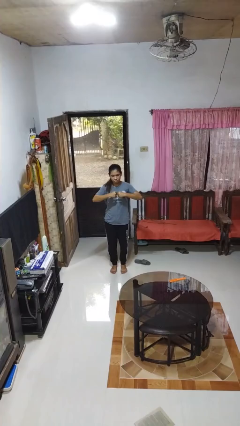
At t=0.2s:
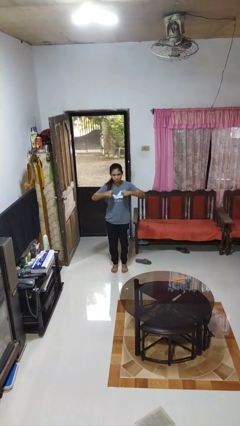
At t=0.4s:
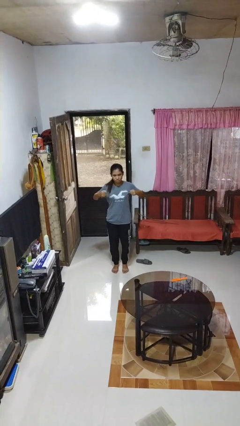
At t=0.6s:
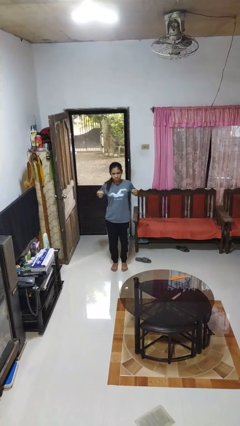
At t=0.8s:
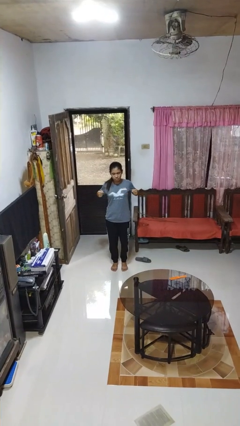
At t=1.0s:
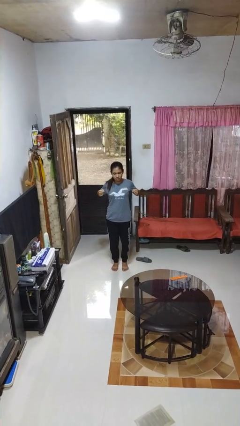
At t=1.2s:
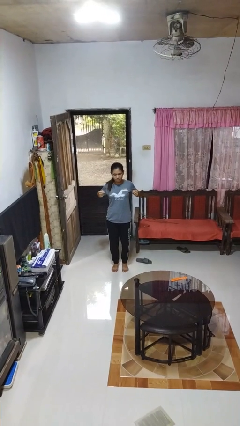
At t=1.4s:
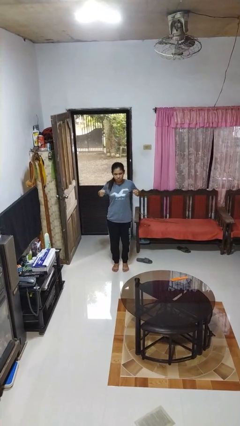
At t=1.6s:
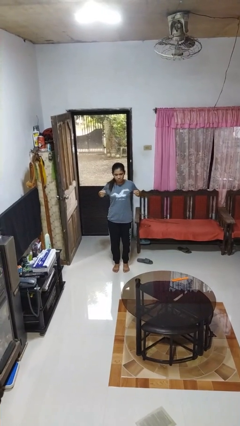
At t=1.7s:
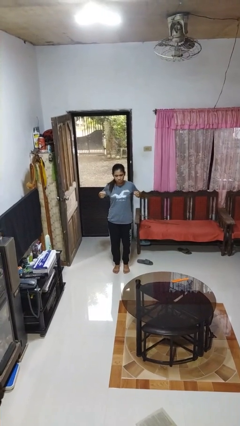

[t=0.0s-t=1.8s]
person gestures zoom in

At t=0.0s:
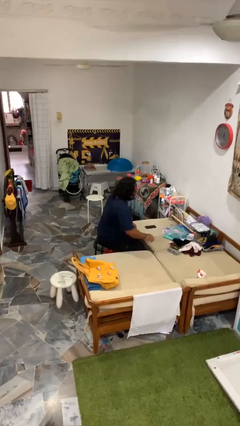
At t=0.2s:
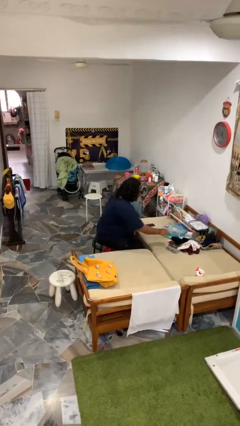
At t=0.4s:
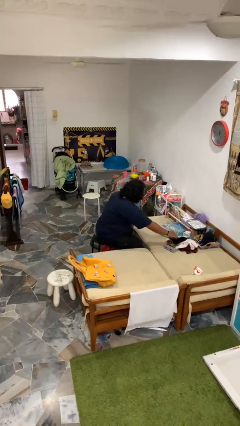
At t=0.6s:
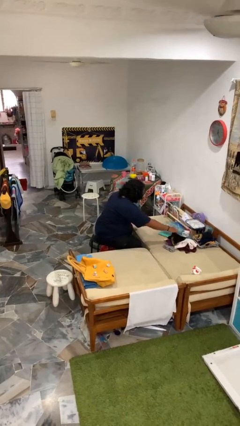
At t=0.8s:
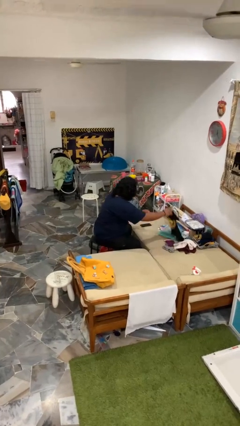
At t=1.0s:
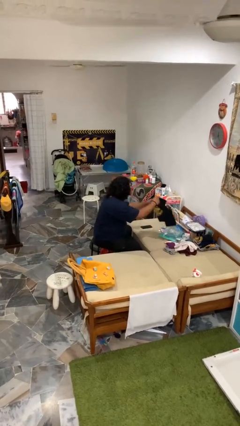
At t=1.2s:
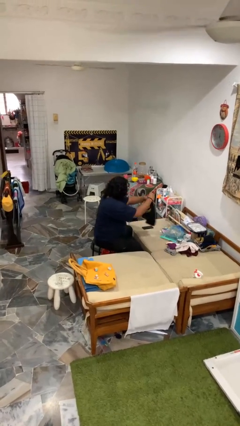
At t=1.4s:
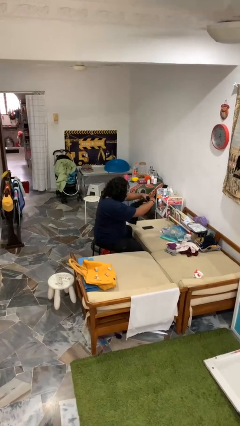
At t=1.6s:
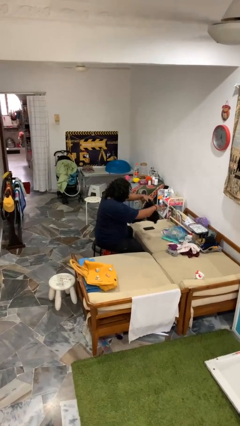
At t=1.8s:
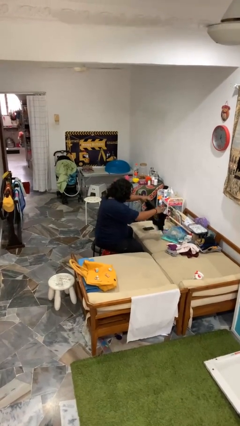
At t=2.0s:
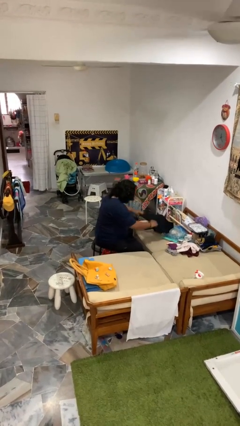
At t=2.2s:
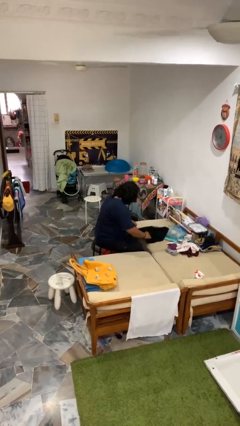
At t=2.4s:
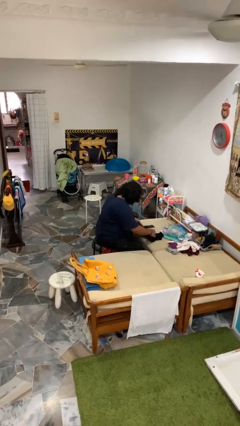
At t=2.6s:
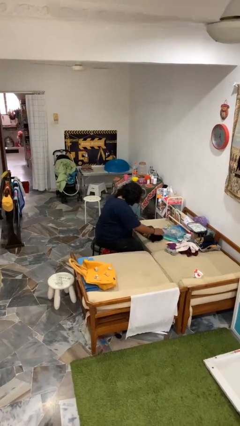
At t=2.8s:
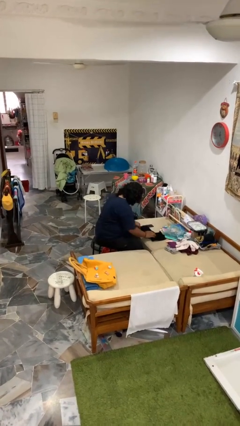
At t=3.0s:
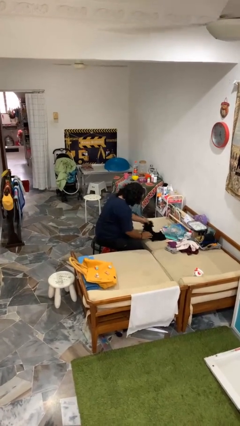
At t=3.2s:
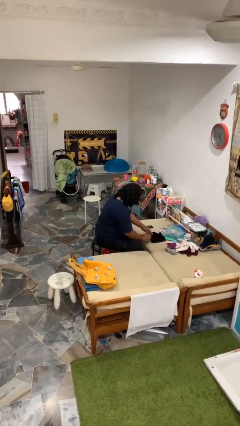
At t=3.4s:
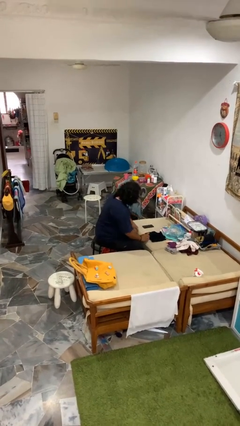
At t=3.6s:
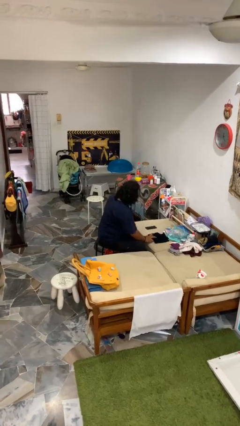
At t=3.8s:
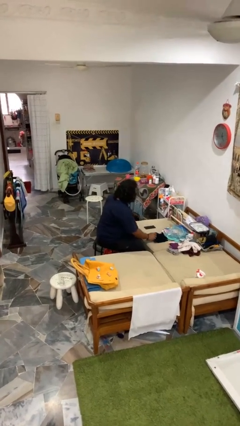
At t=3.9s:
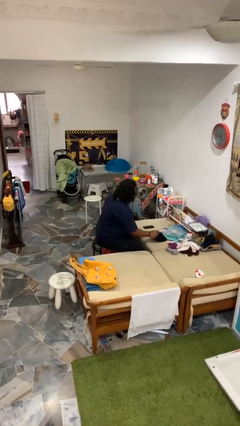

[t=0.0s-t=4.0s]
person folds shirt

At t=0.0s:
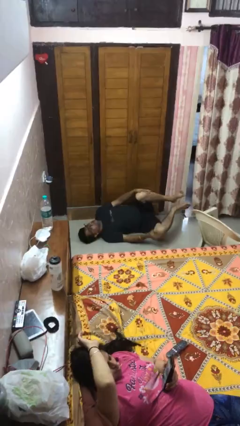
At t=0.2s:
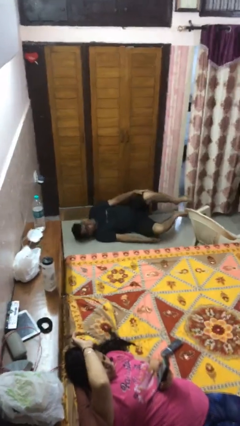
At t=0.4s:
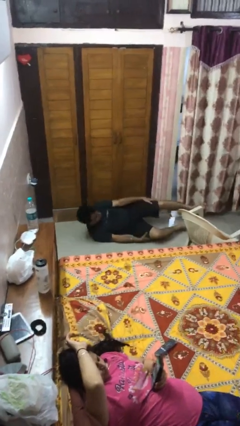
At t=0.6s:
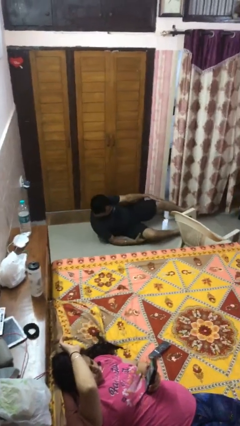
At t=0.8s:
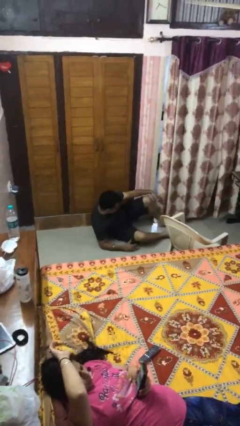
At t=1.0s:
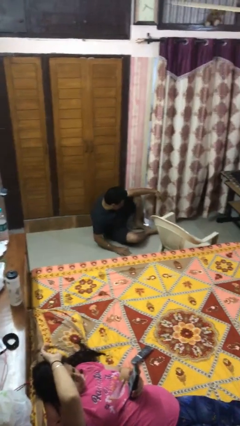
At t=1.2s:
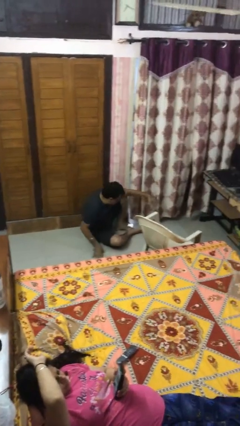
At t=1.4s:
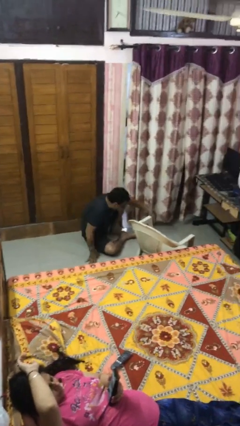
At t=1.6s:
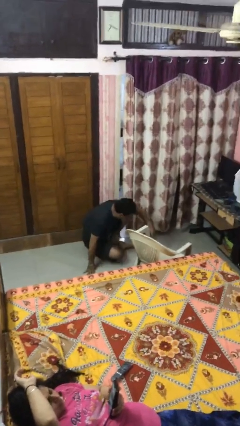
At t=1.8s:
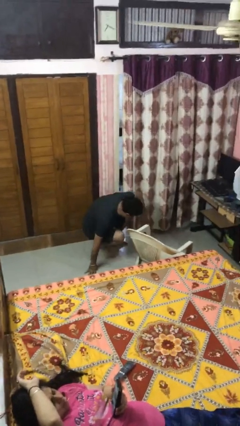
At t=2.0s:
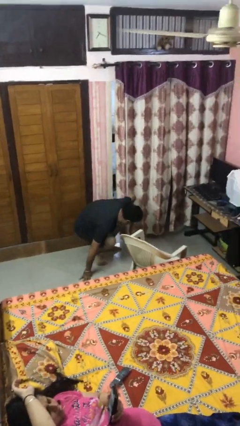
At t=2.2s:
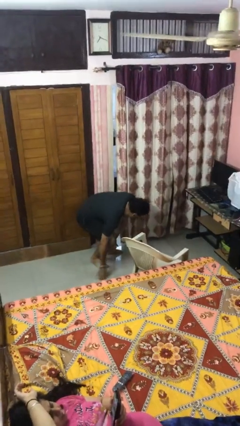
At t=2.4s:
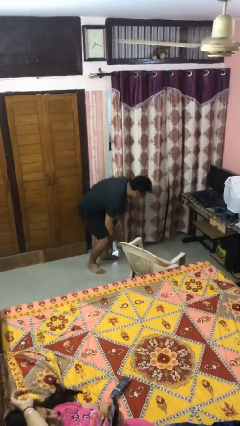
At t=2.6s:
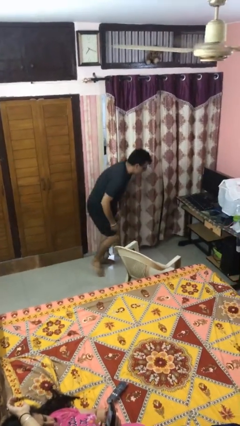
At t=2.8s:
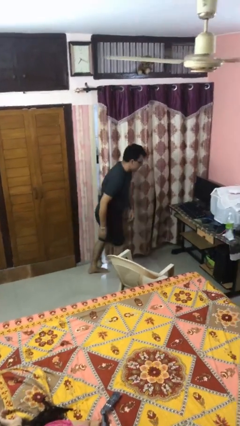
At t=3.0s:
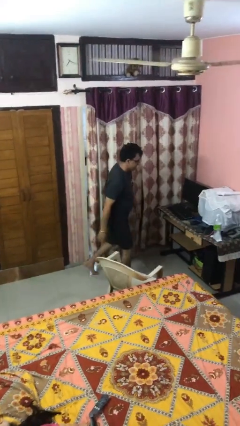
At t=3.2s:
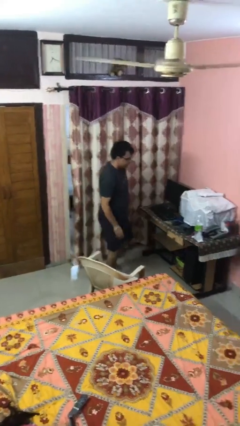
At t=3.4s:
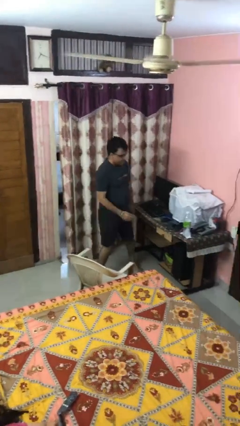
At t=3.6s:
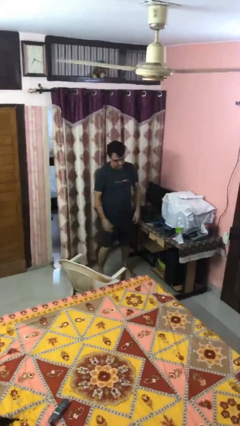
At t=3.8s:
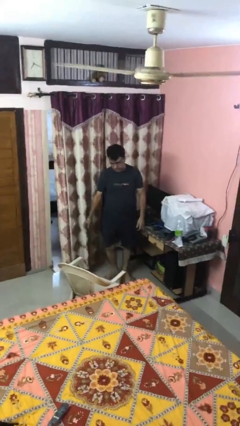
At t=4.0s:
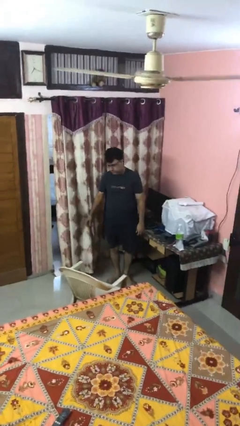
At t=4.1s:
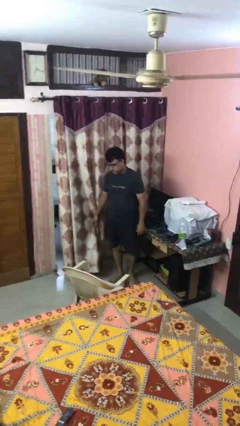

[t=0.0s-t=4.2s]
person stands up from floor

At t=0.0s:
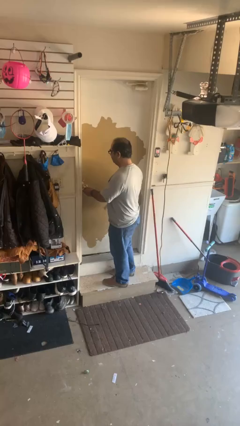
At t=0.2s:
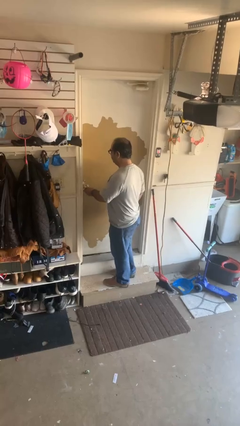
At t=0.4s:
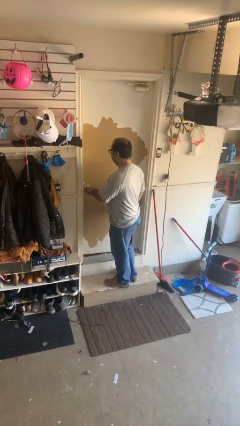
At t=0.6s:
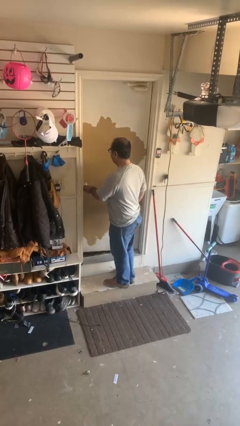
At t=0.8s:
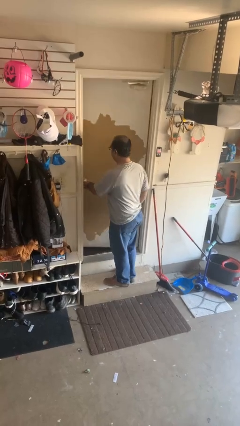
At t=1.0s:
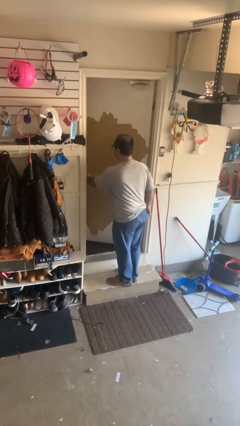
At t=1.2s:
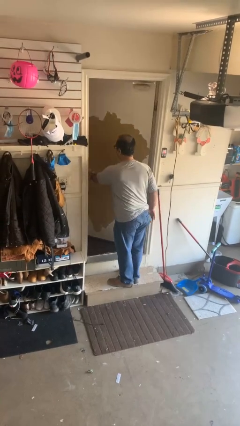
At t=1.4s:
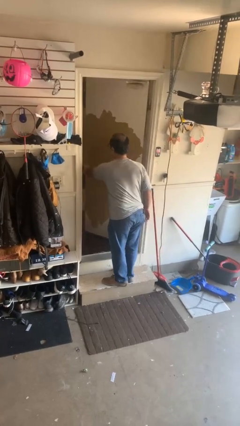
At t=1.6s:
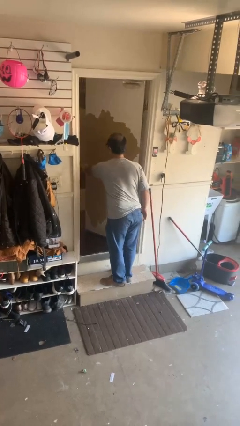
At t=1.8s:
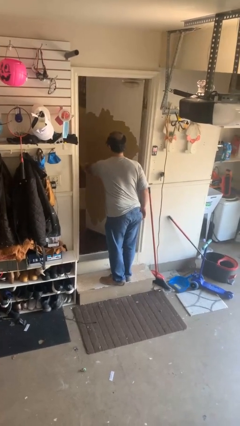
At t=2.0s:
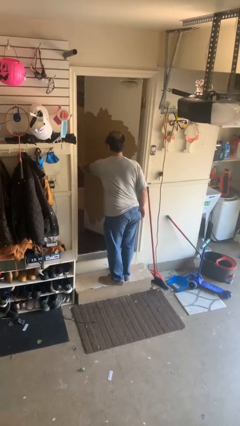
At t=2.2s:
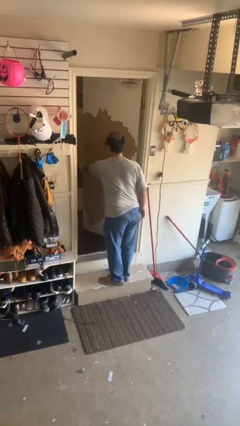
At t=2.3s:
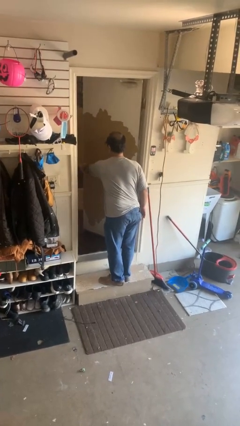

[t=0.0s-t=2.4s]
person opens facility door

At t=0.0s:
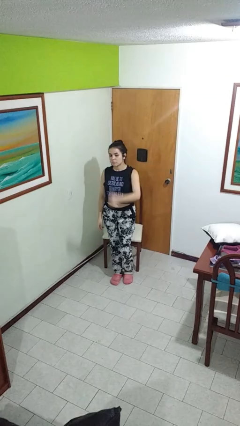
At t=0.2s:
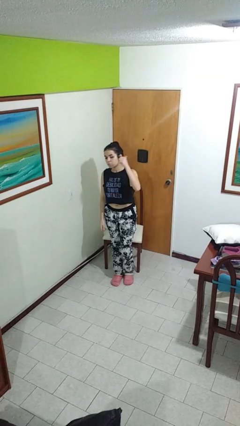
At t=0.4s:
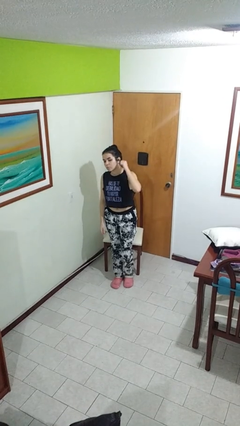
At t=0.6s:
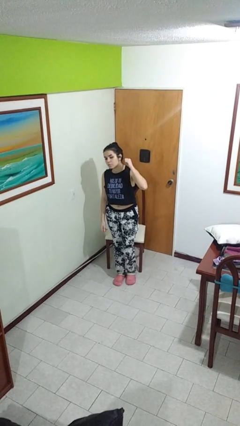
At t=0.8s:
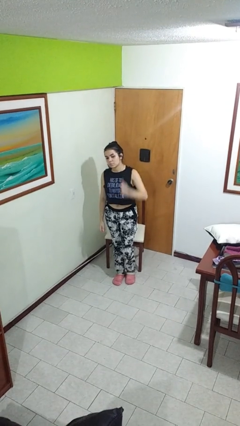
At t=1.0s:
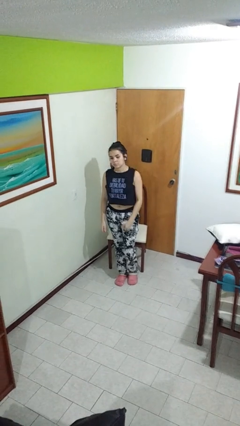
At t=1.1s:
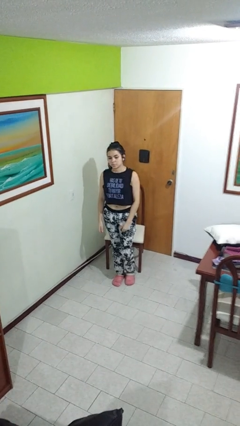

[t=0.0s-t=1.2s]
person gestures behind me

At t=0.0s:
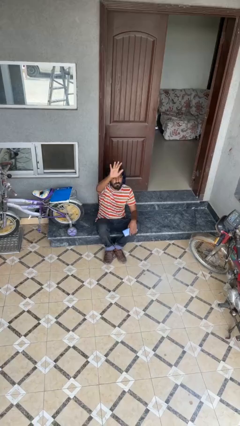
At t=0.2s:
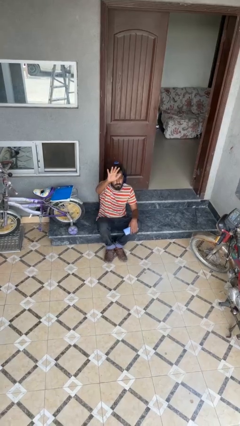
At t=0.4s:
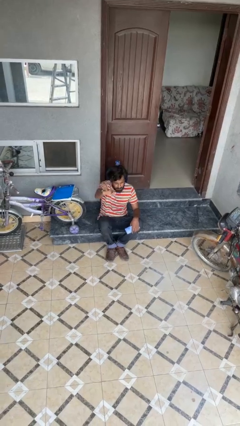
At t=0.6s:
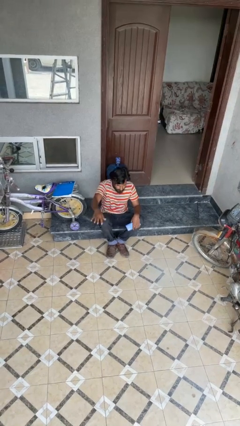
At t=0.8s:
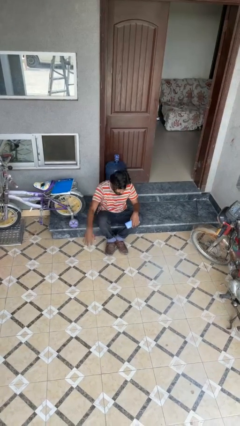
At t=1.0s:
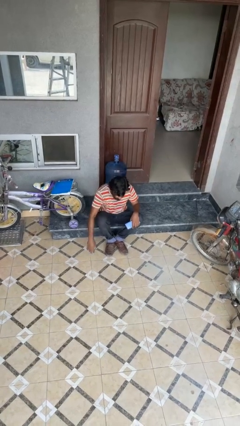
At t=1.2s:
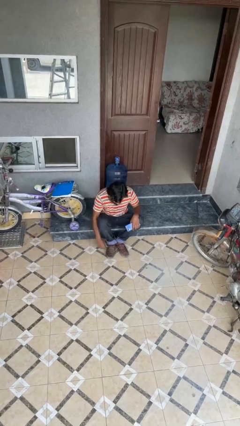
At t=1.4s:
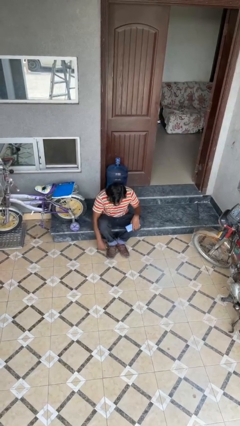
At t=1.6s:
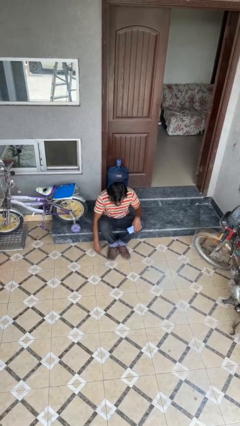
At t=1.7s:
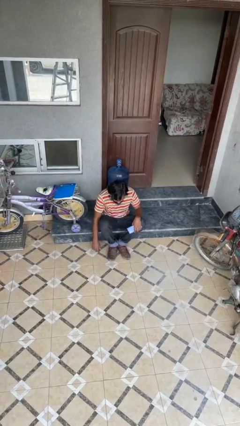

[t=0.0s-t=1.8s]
person gestures lower hand

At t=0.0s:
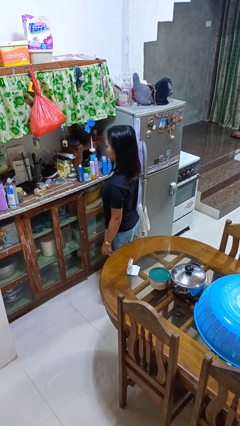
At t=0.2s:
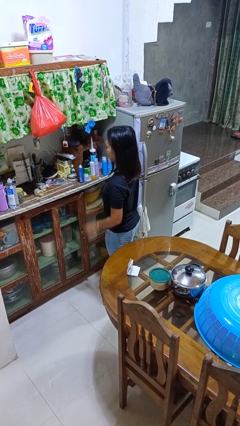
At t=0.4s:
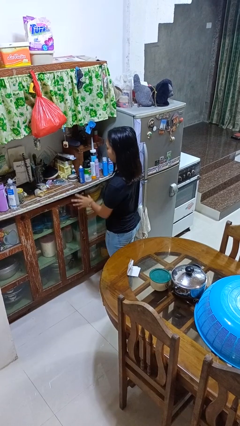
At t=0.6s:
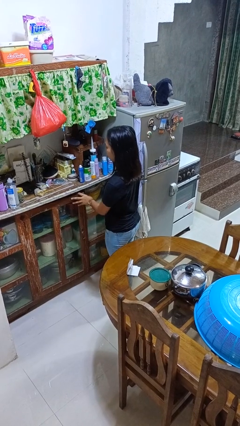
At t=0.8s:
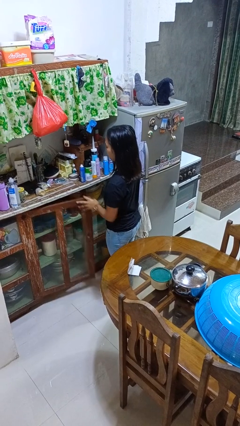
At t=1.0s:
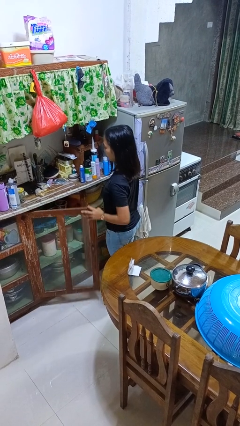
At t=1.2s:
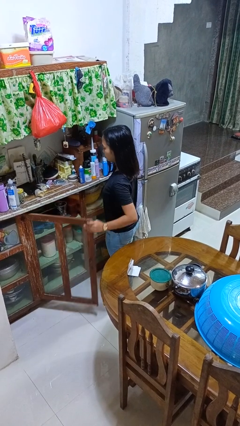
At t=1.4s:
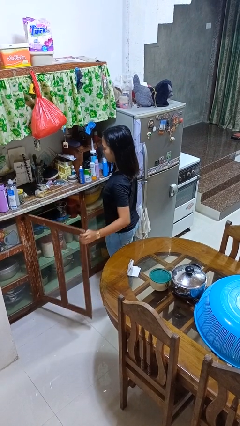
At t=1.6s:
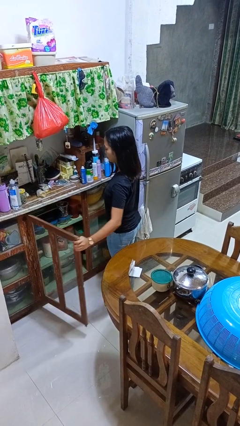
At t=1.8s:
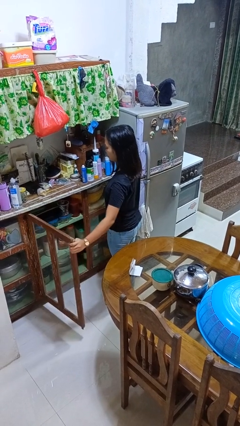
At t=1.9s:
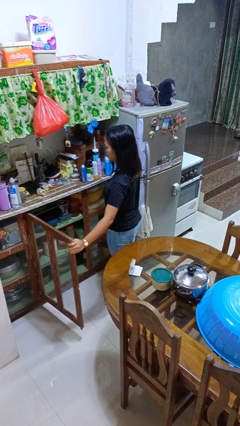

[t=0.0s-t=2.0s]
person opens cabinet
